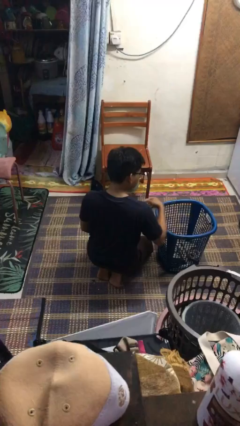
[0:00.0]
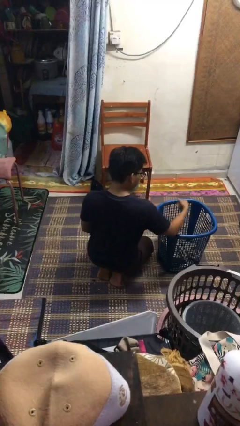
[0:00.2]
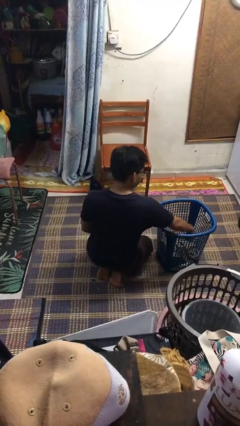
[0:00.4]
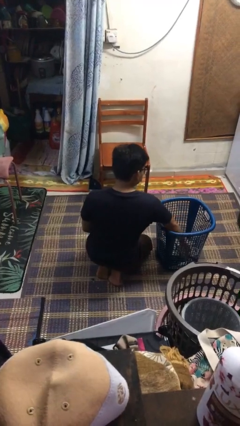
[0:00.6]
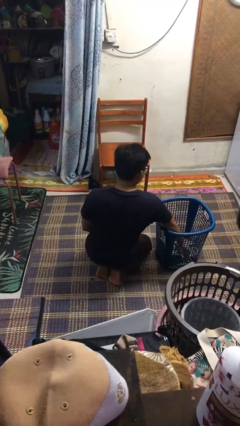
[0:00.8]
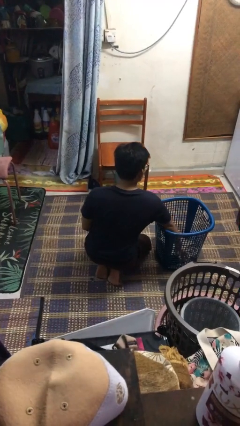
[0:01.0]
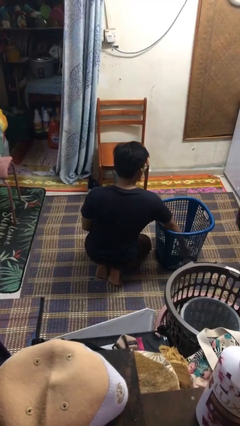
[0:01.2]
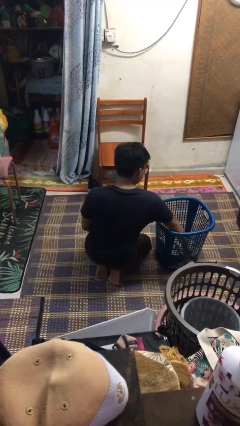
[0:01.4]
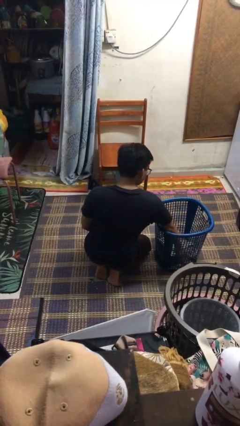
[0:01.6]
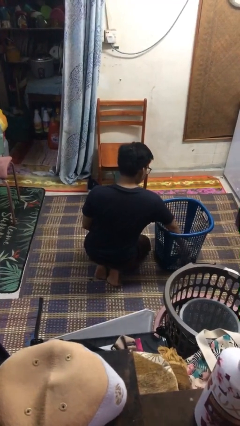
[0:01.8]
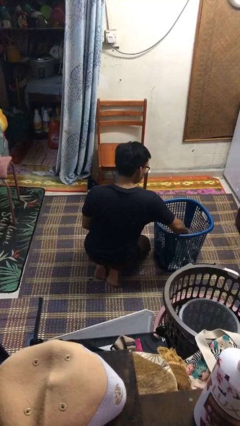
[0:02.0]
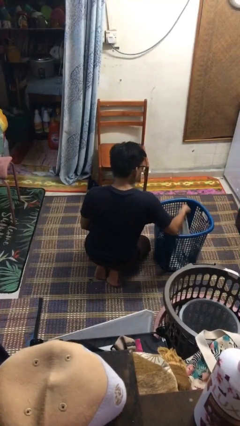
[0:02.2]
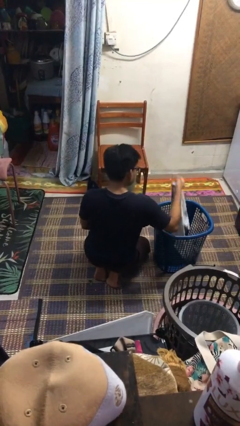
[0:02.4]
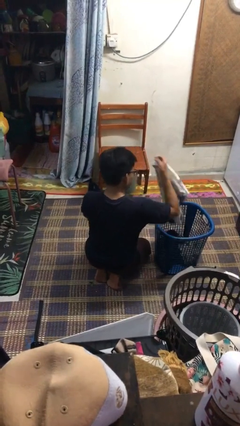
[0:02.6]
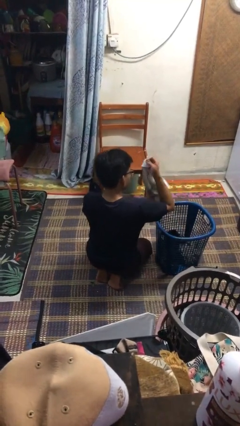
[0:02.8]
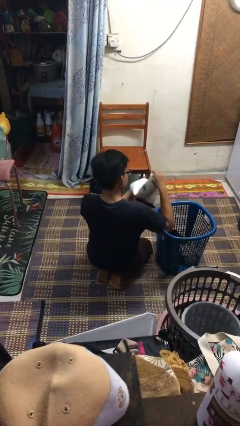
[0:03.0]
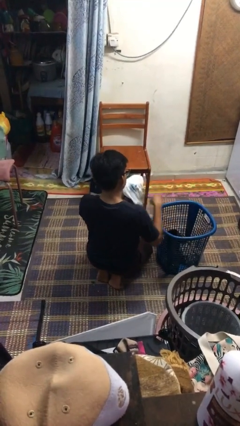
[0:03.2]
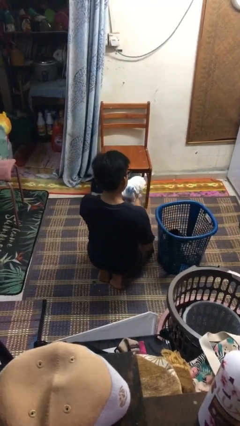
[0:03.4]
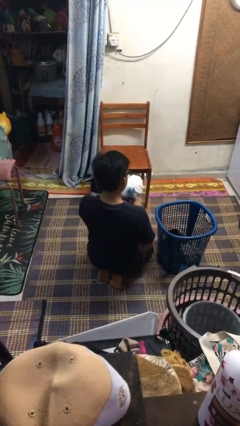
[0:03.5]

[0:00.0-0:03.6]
person takes object from basket

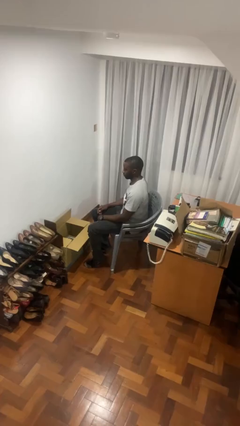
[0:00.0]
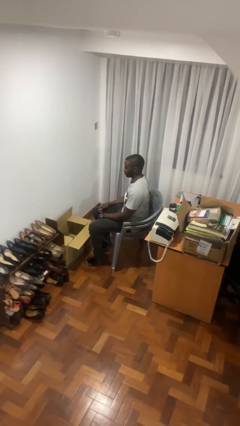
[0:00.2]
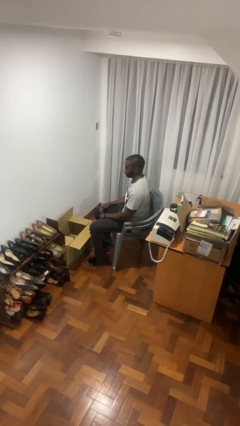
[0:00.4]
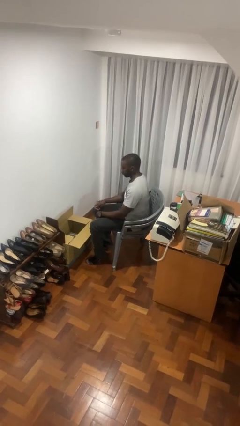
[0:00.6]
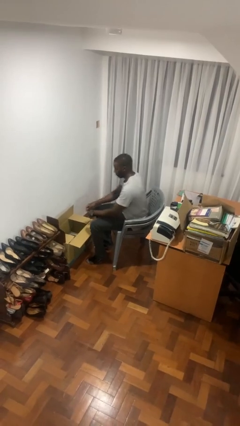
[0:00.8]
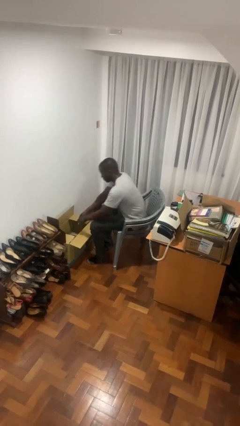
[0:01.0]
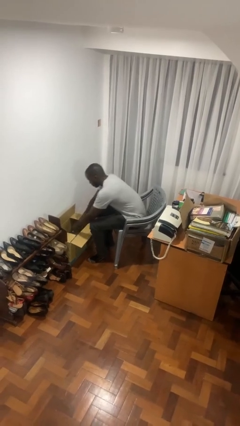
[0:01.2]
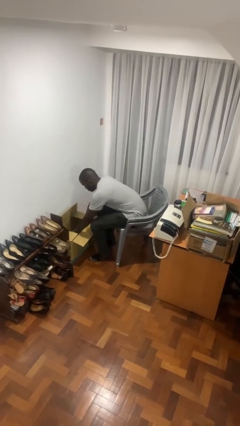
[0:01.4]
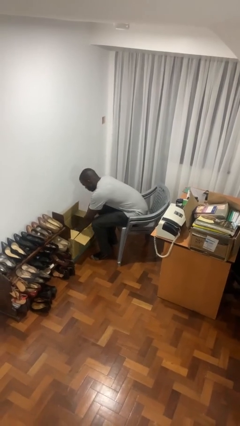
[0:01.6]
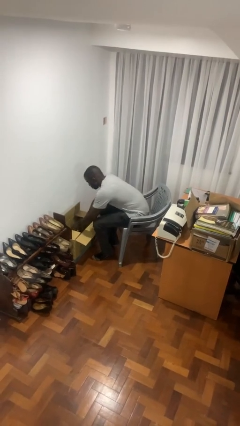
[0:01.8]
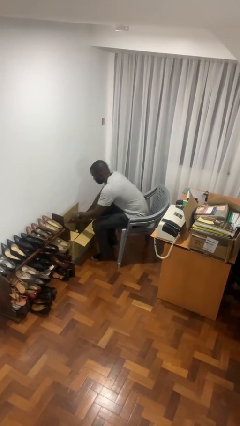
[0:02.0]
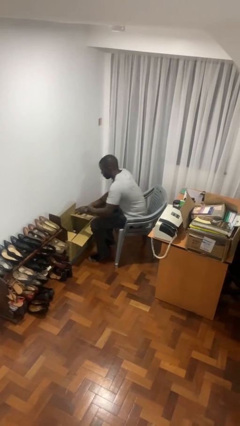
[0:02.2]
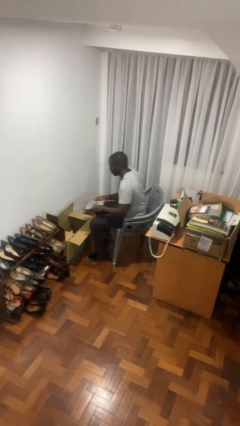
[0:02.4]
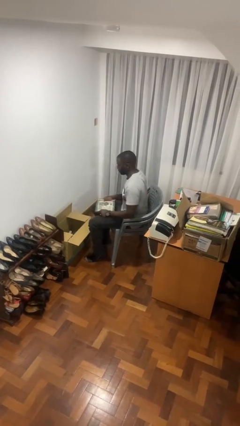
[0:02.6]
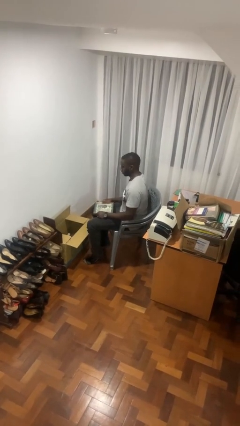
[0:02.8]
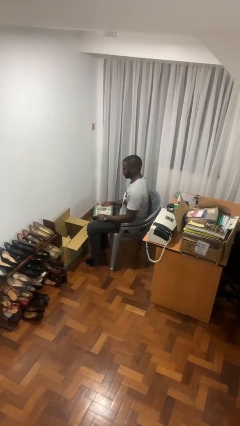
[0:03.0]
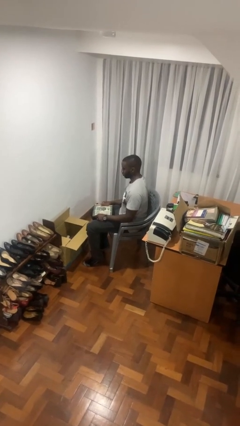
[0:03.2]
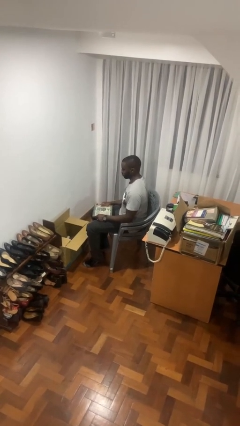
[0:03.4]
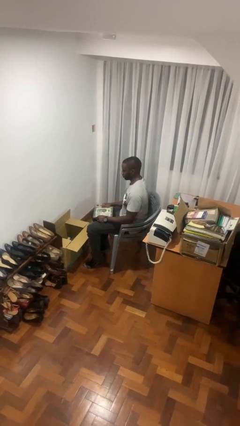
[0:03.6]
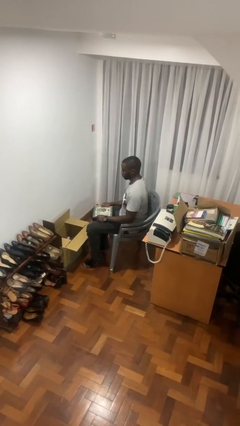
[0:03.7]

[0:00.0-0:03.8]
person takes object from box

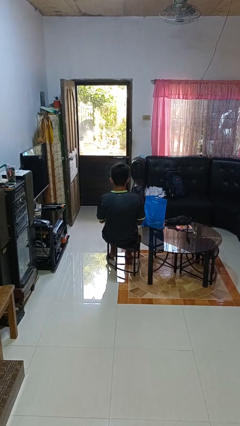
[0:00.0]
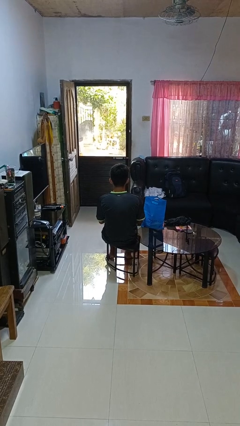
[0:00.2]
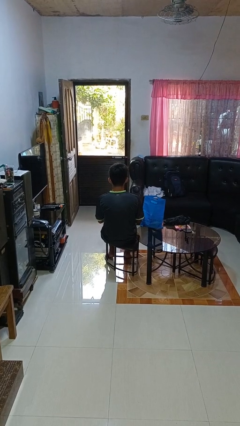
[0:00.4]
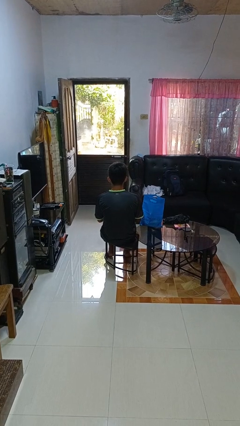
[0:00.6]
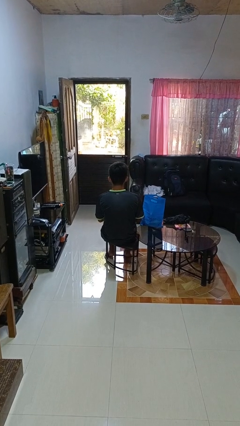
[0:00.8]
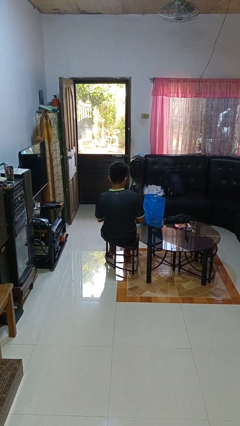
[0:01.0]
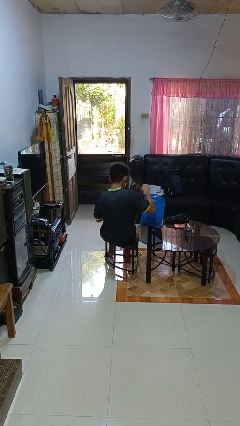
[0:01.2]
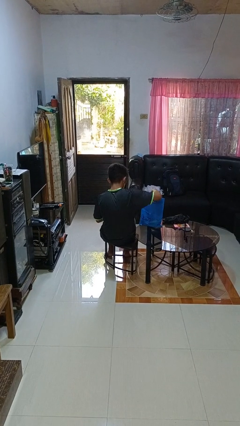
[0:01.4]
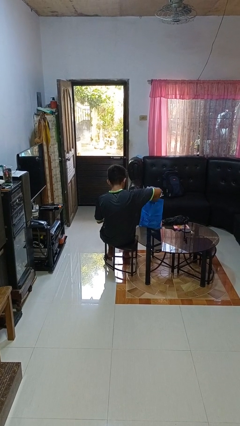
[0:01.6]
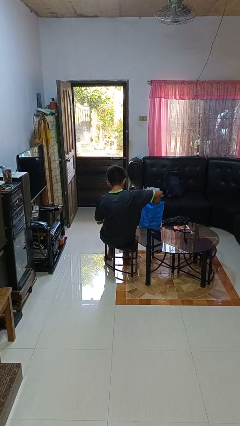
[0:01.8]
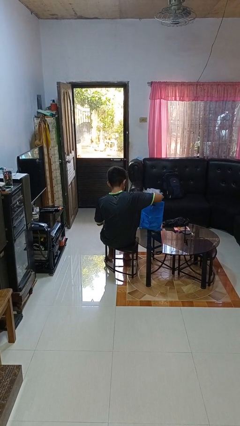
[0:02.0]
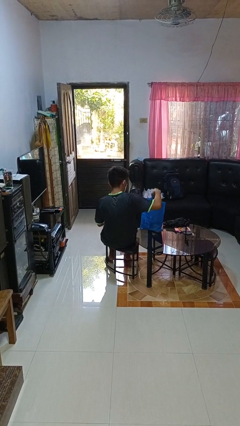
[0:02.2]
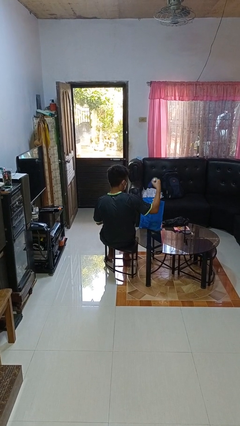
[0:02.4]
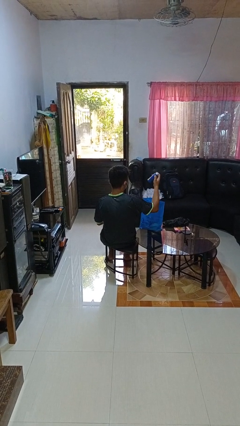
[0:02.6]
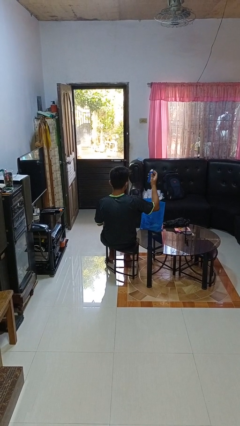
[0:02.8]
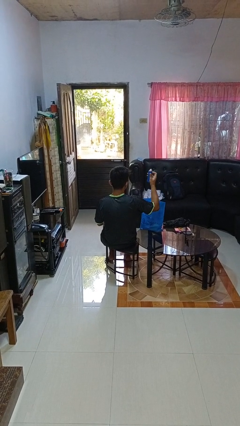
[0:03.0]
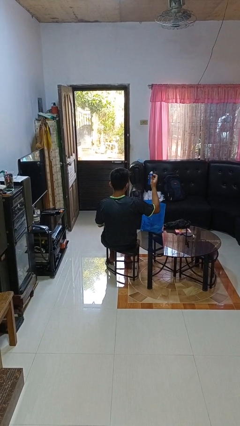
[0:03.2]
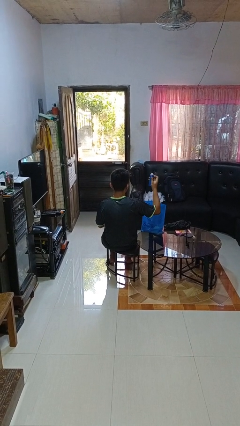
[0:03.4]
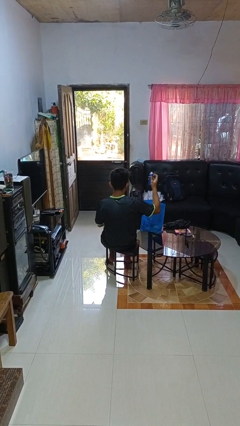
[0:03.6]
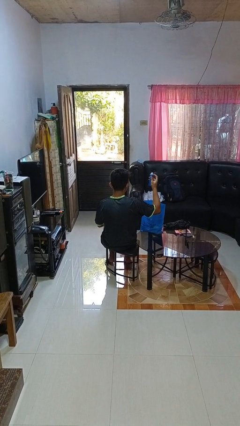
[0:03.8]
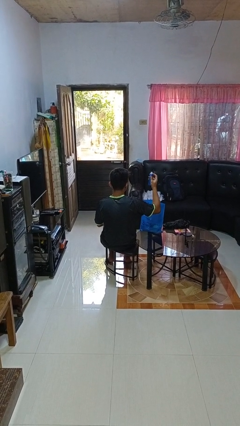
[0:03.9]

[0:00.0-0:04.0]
person takes object from bag

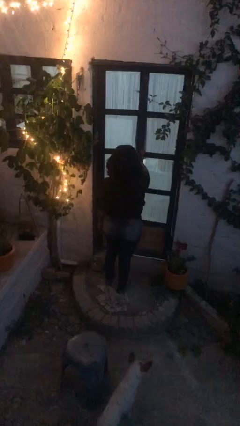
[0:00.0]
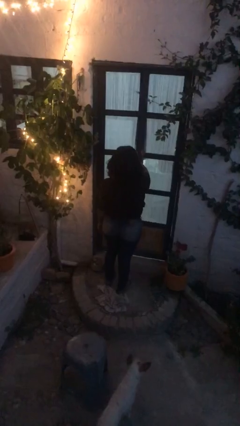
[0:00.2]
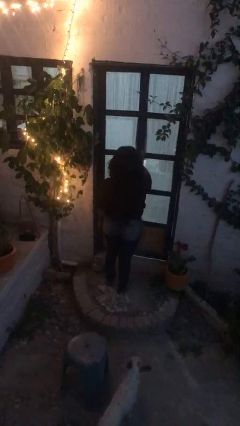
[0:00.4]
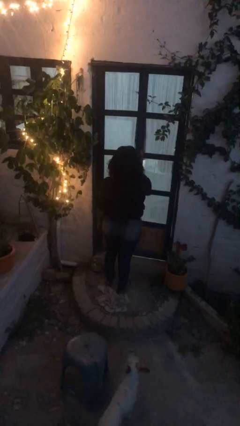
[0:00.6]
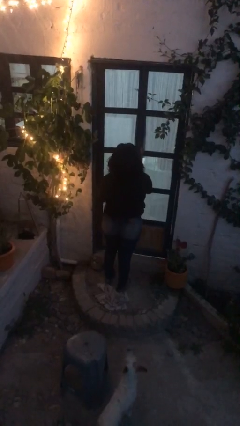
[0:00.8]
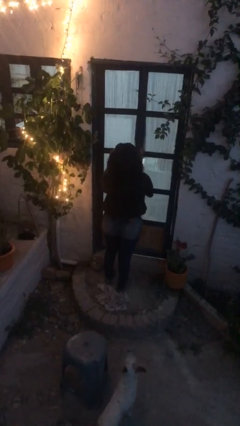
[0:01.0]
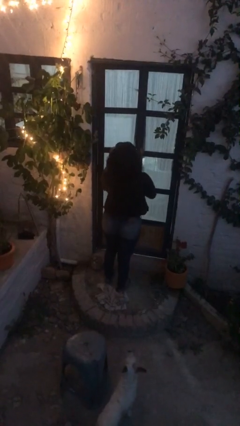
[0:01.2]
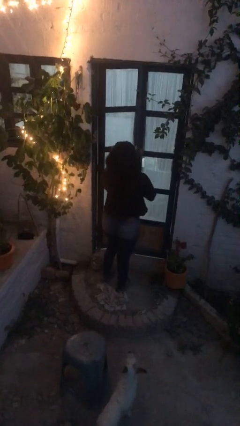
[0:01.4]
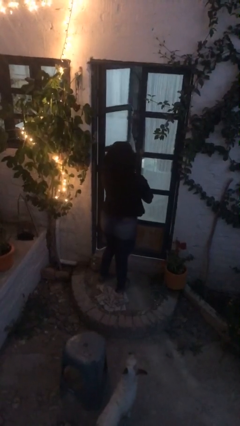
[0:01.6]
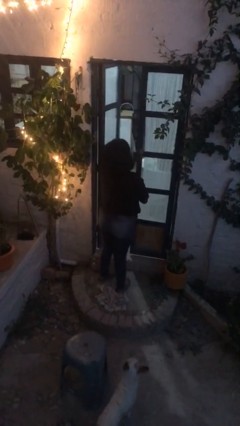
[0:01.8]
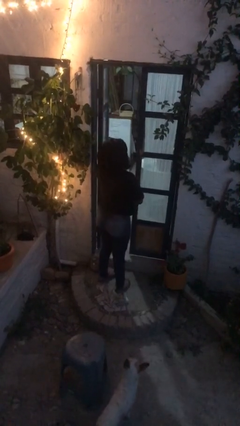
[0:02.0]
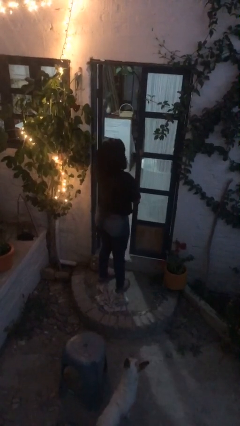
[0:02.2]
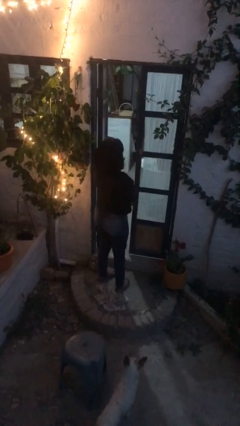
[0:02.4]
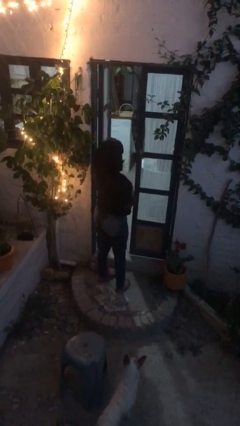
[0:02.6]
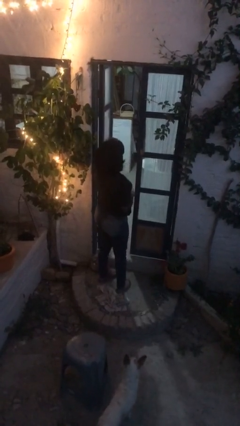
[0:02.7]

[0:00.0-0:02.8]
person opens facility door

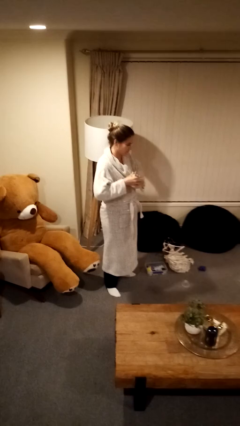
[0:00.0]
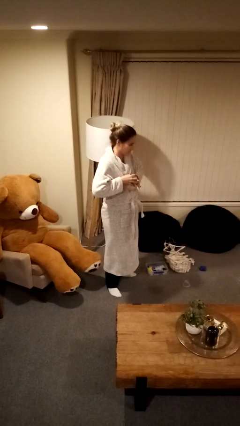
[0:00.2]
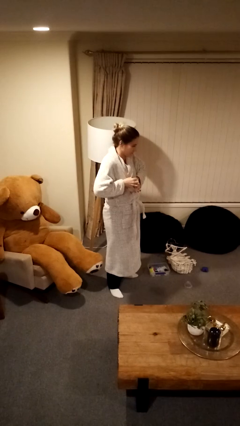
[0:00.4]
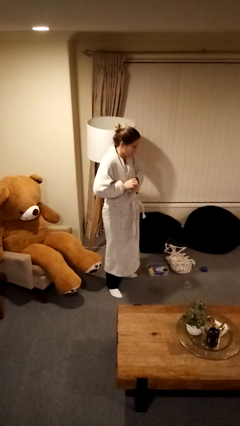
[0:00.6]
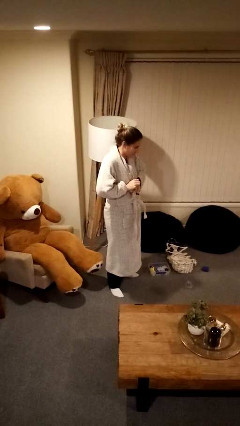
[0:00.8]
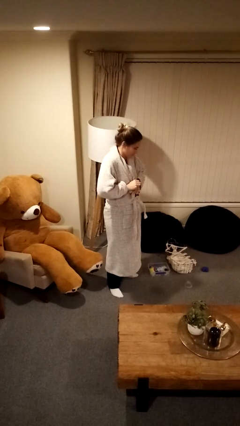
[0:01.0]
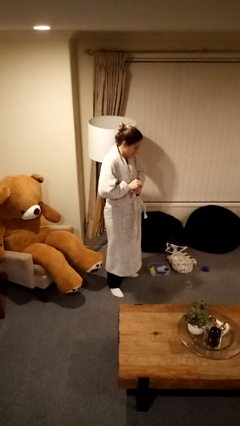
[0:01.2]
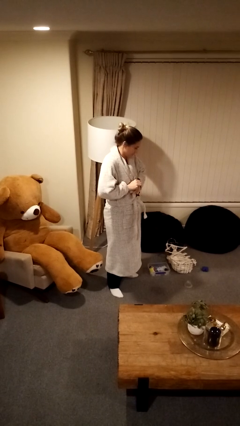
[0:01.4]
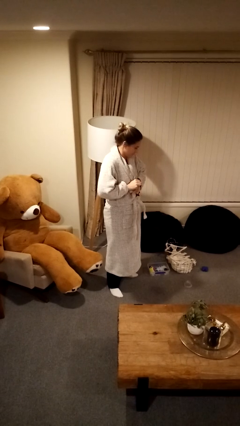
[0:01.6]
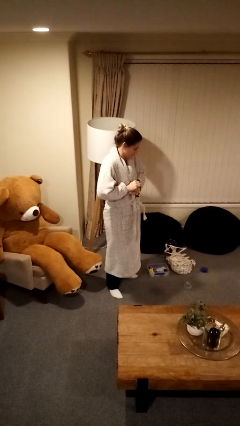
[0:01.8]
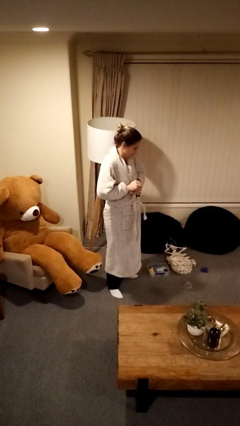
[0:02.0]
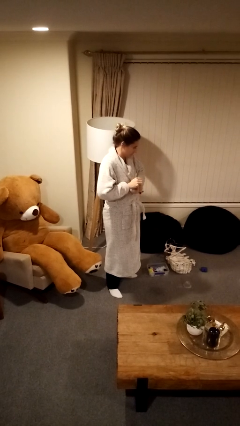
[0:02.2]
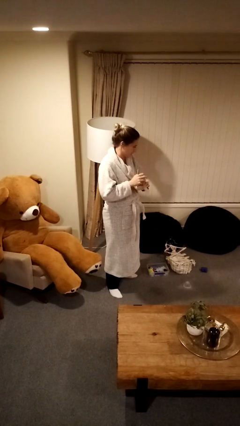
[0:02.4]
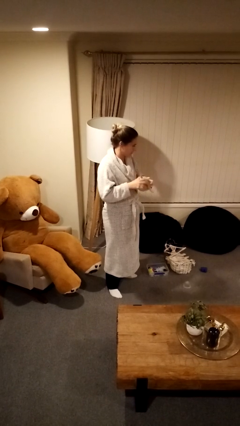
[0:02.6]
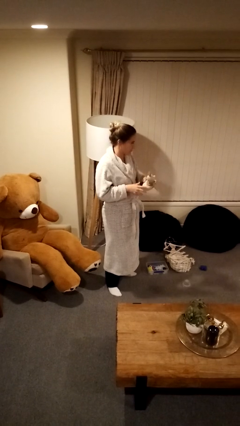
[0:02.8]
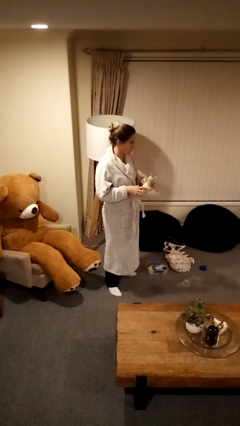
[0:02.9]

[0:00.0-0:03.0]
person squeezes object
